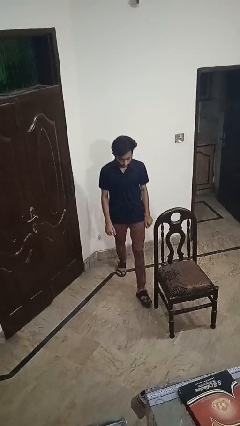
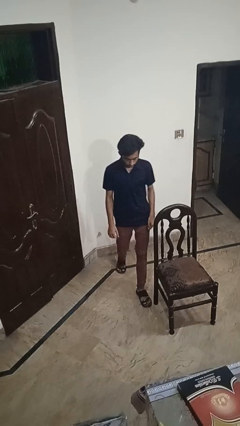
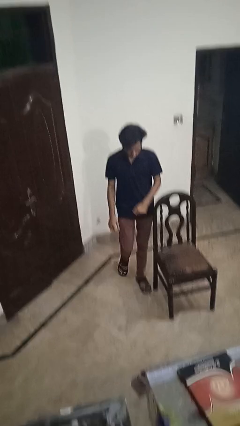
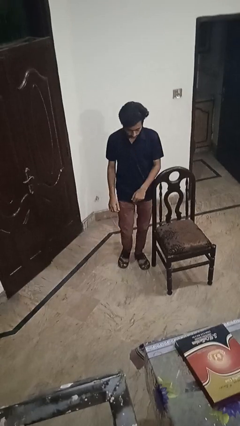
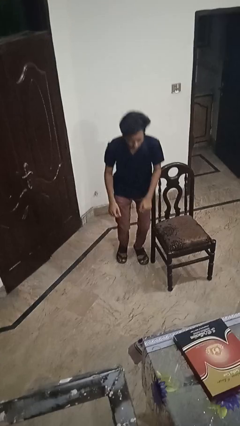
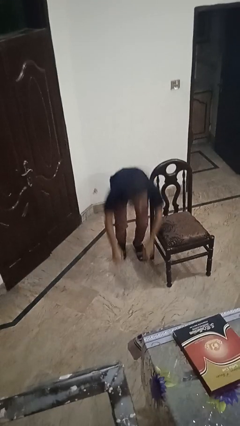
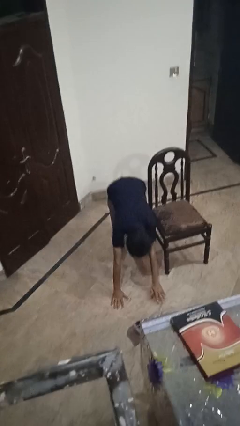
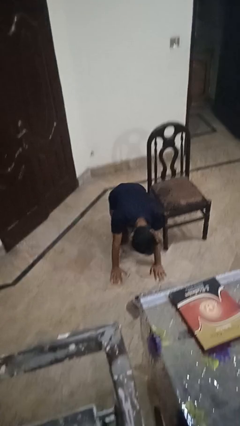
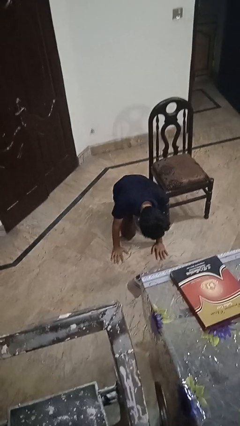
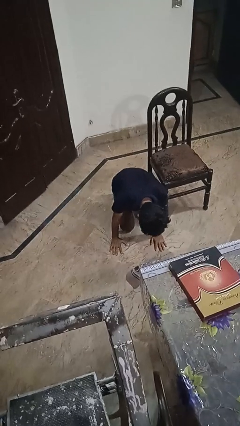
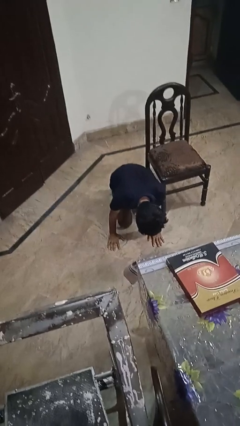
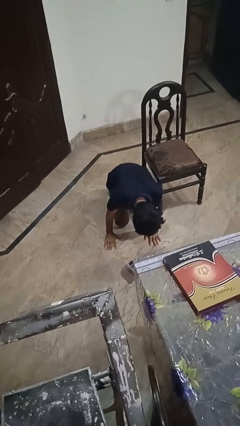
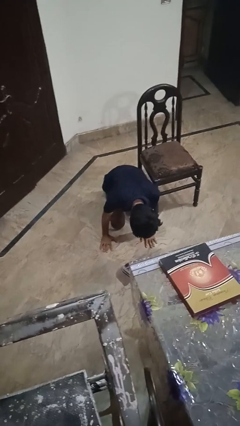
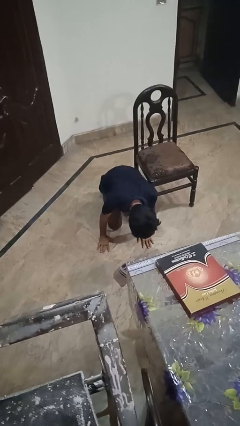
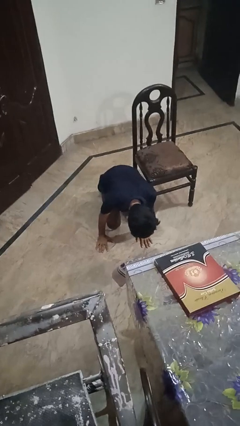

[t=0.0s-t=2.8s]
person trips on object on floor

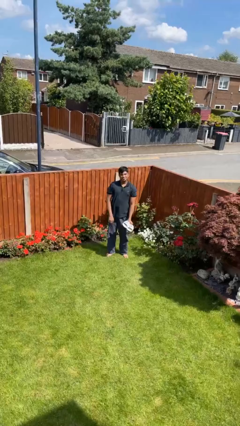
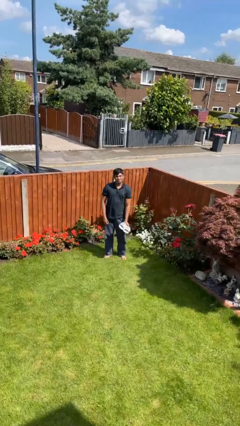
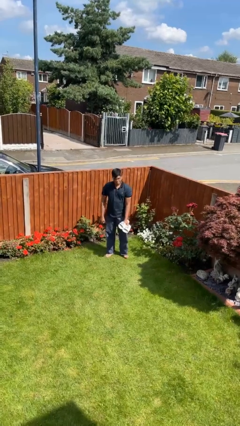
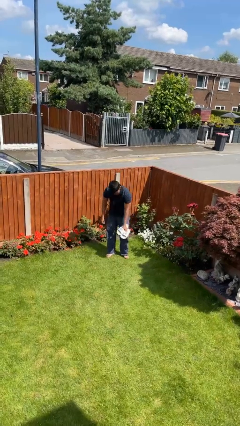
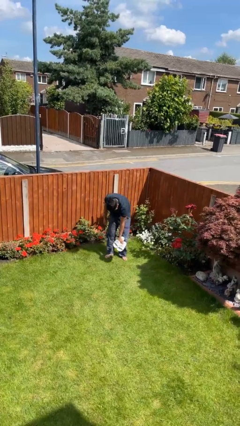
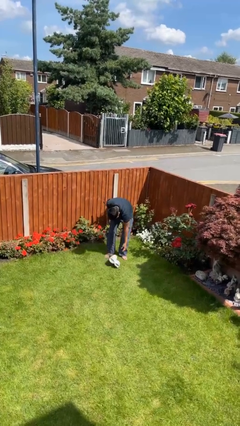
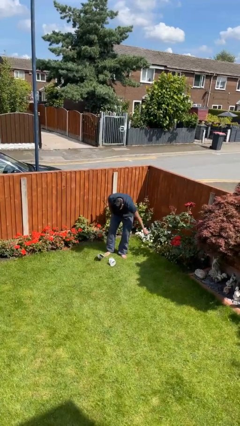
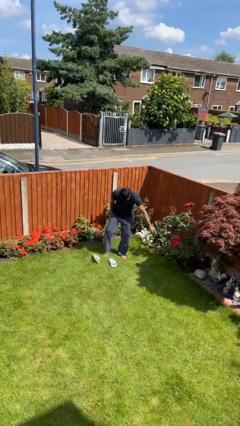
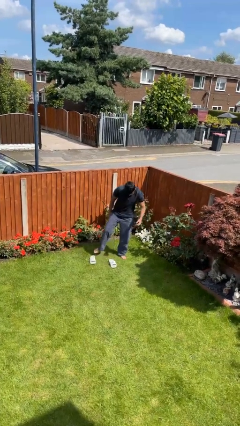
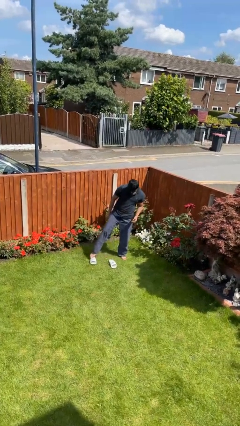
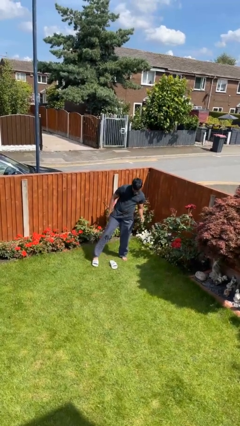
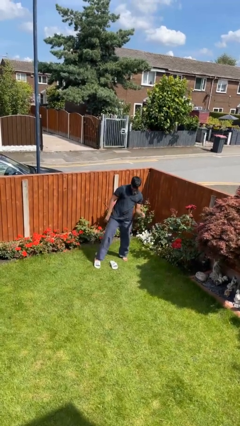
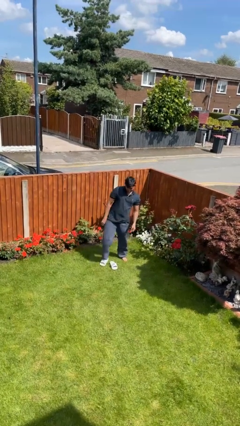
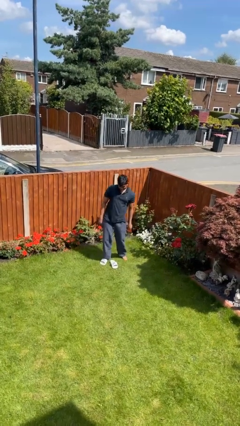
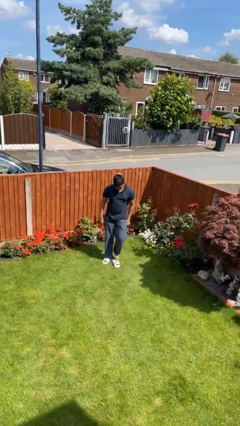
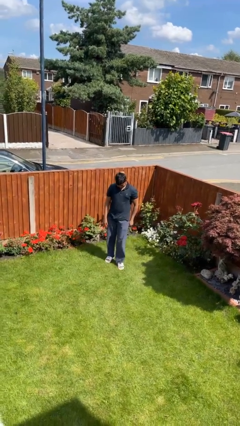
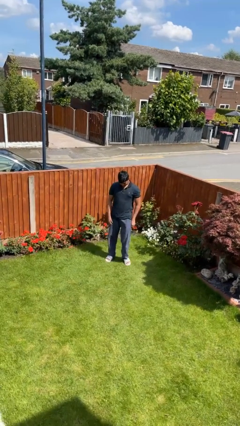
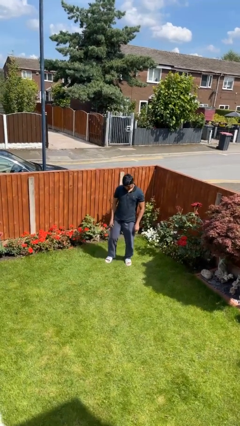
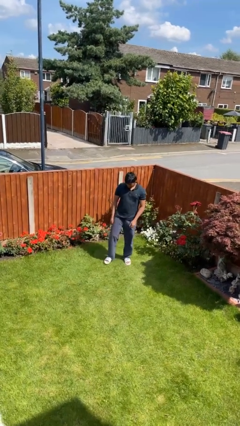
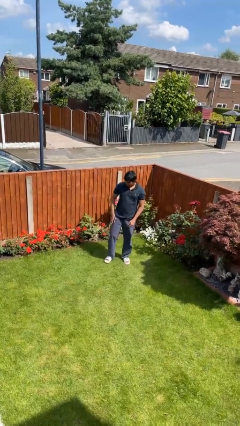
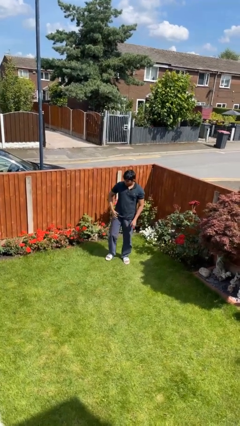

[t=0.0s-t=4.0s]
person puts on shoes

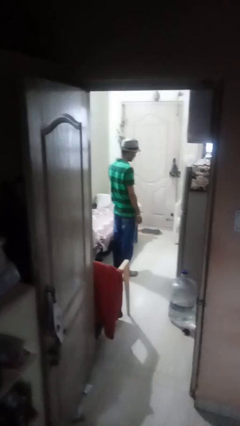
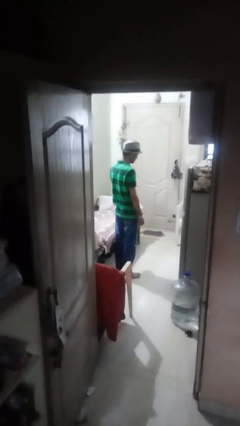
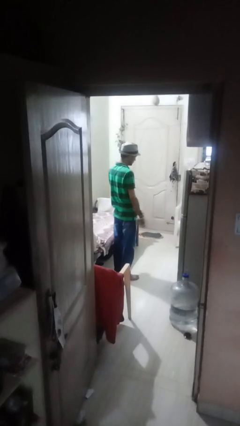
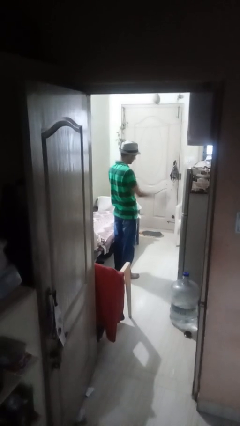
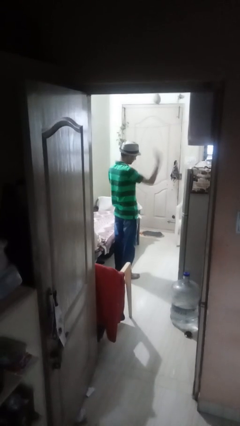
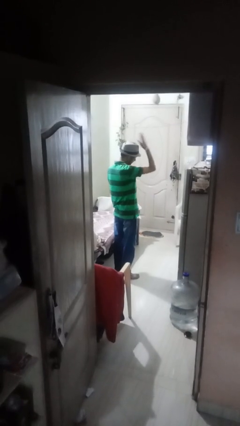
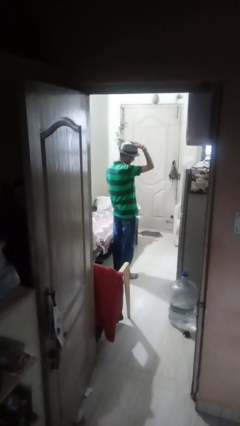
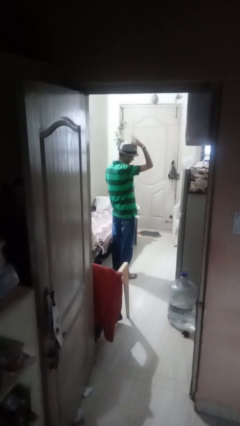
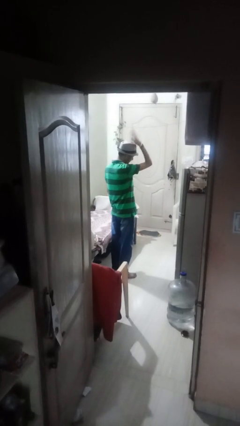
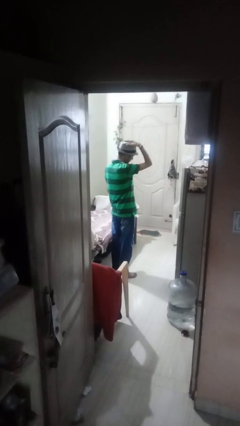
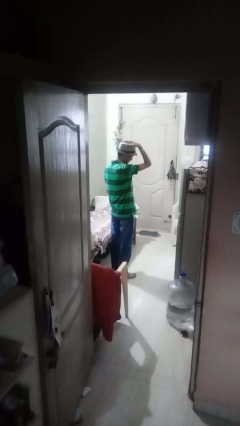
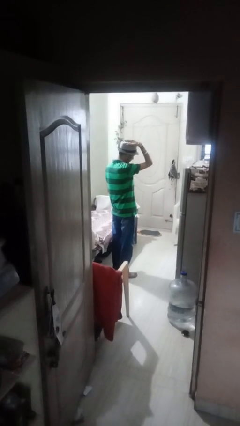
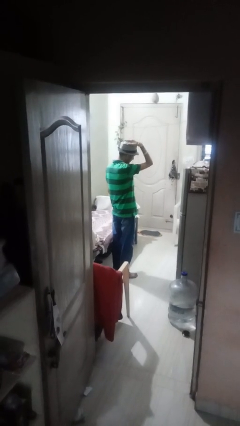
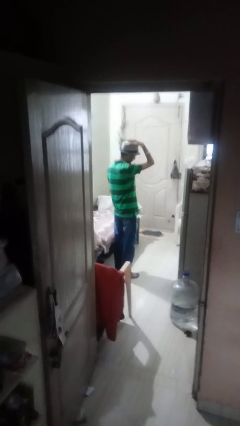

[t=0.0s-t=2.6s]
person pats head

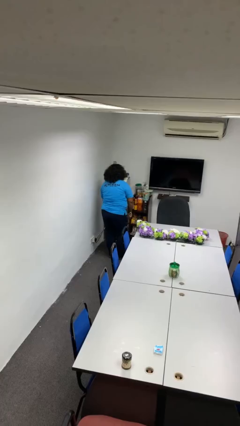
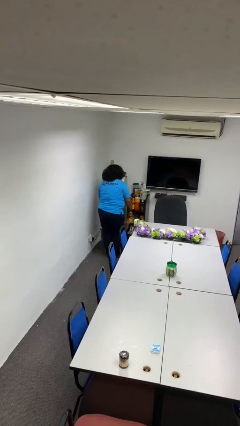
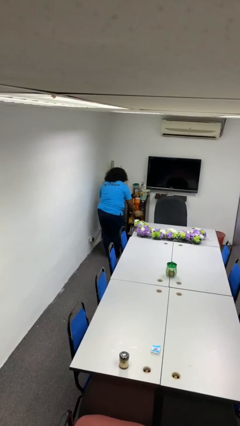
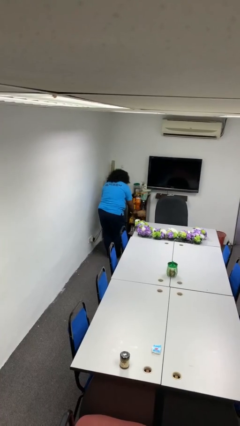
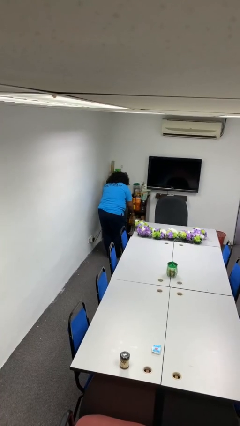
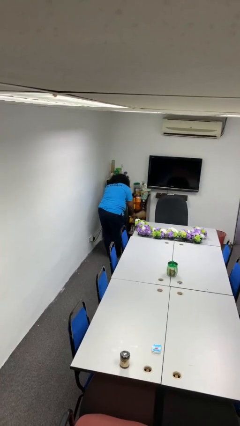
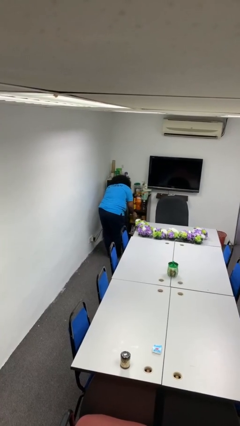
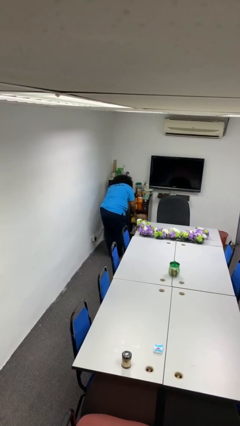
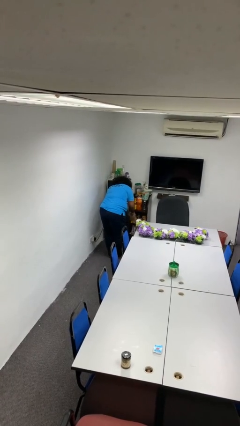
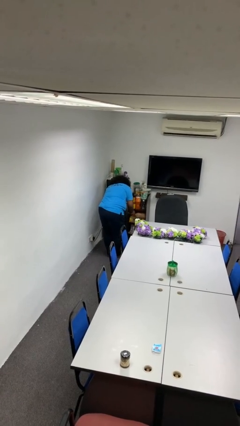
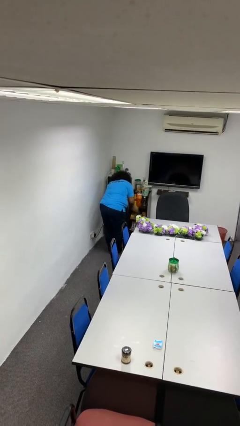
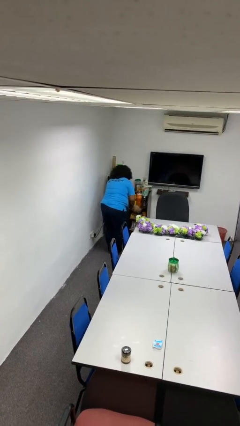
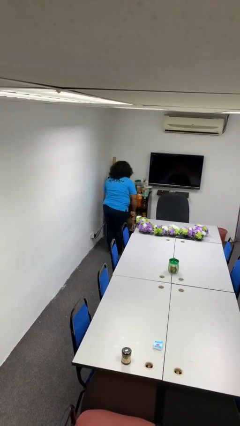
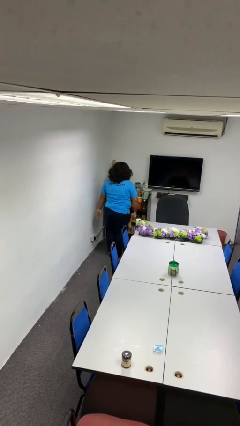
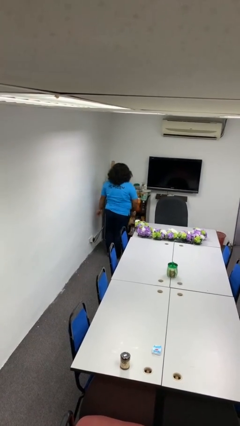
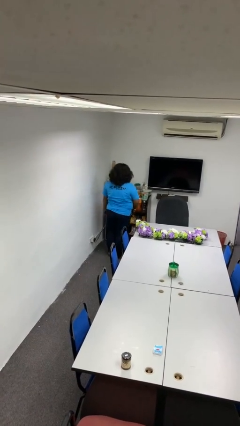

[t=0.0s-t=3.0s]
person dusts furniture

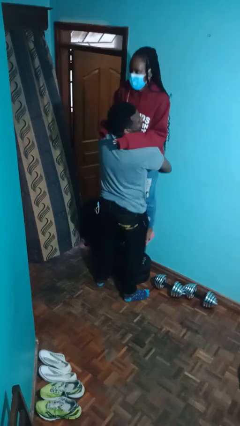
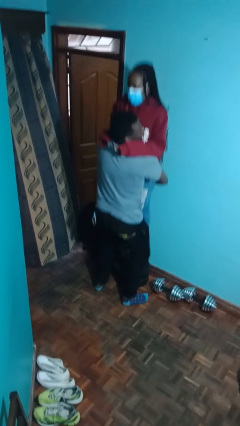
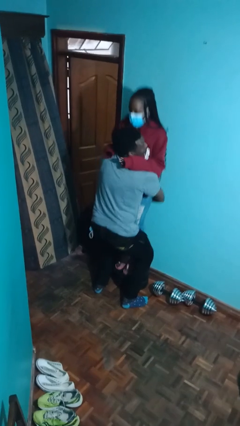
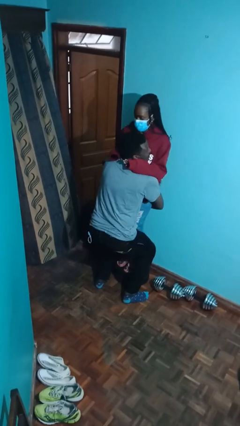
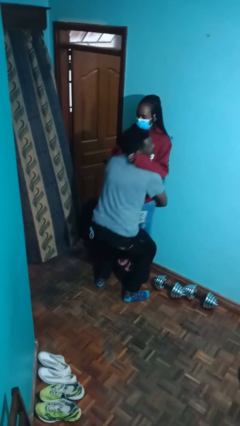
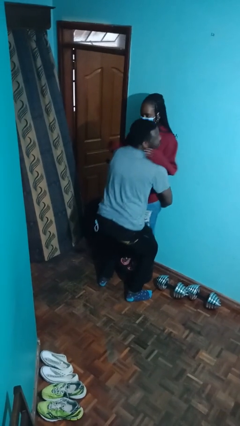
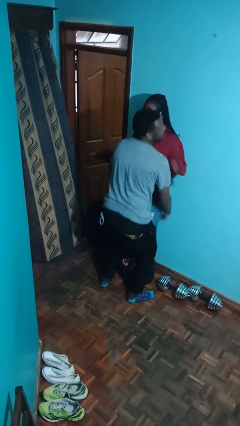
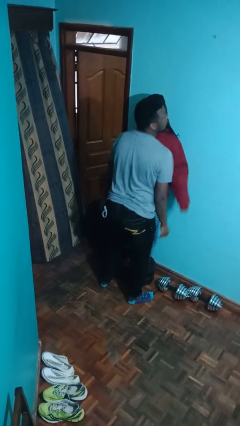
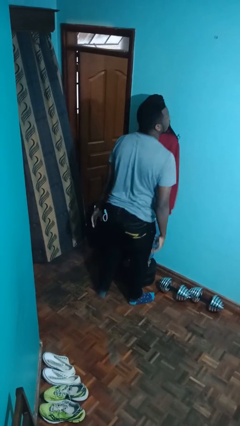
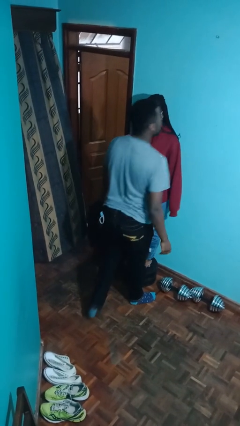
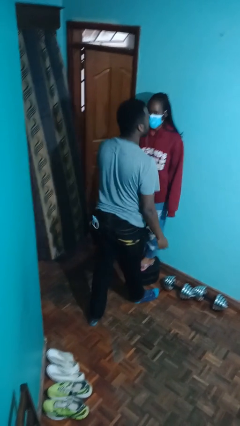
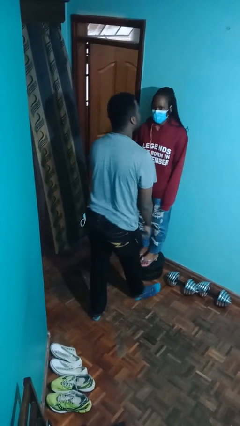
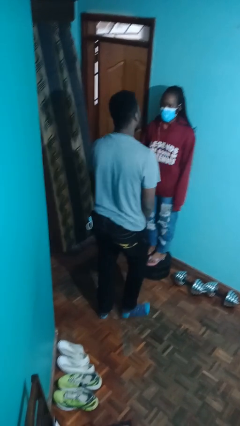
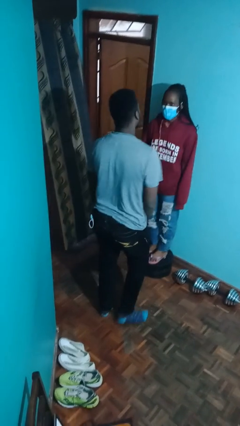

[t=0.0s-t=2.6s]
person puts down person

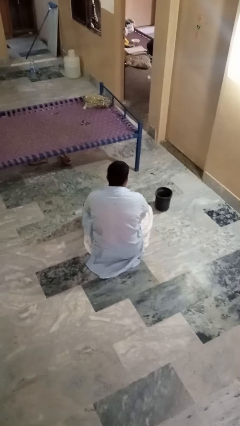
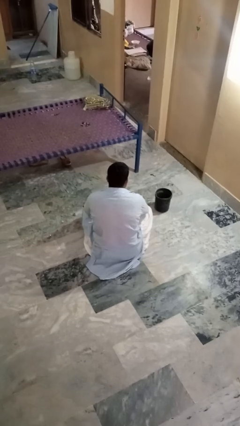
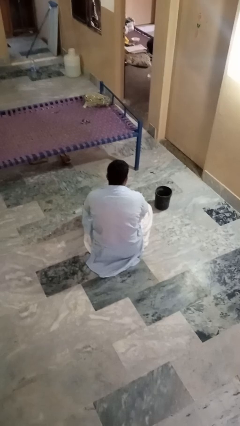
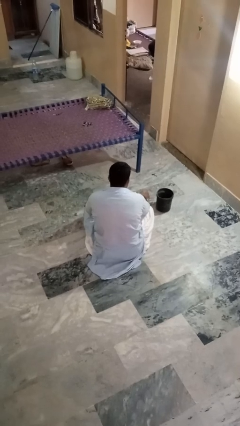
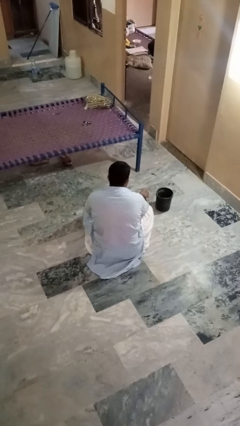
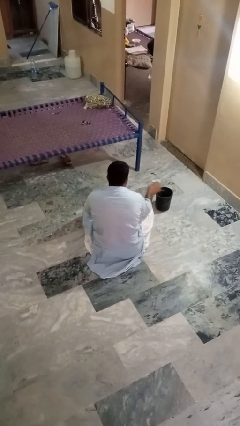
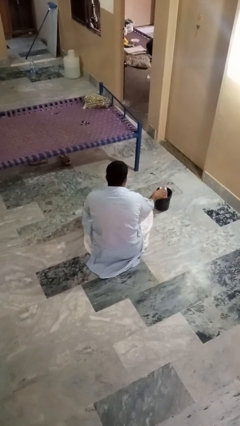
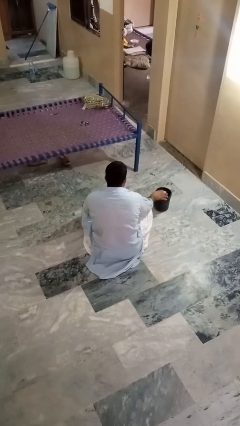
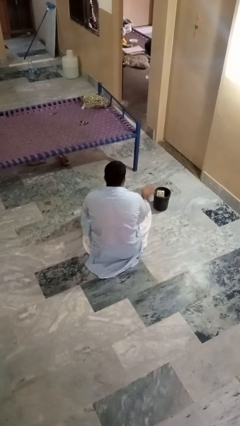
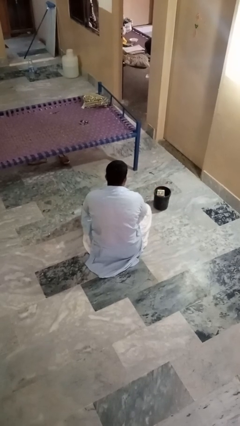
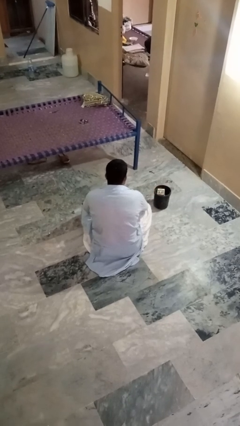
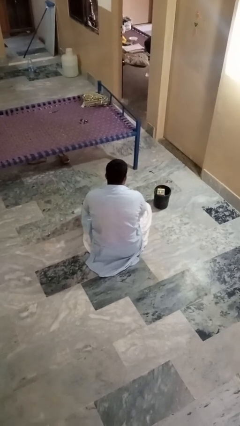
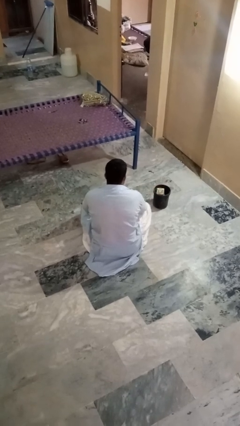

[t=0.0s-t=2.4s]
person puts object into basket
